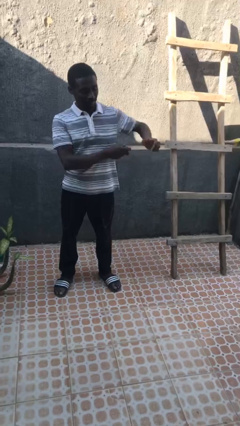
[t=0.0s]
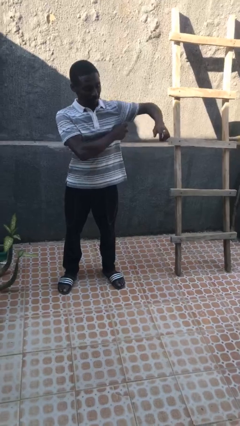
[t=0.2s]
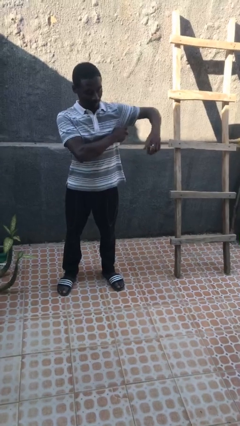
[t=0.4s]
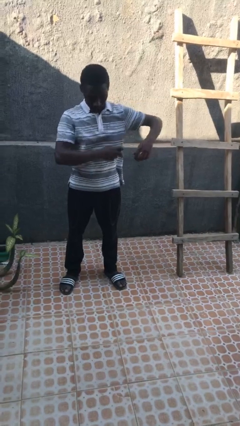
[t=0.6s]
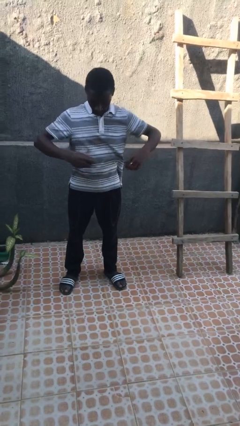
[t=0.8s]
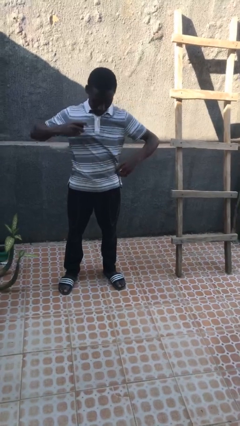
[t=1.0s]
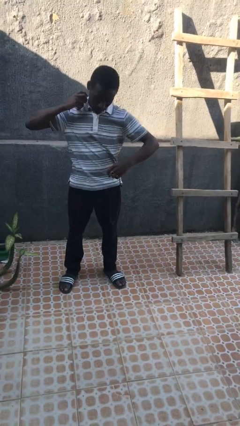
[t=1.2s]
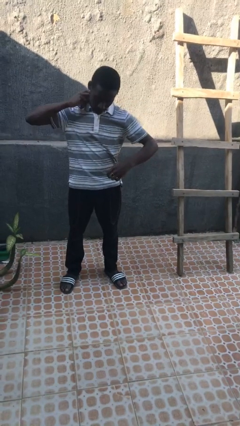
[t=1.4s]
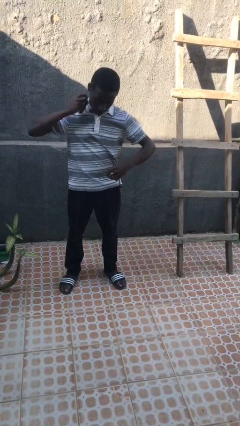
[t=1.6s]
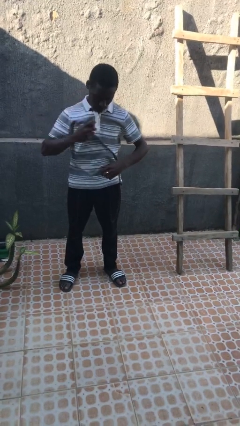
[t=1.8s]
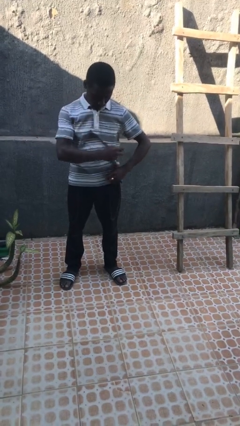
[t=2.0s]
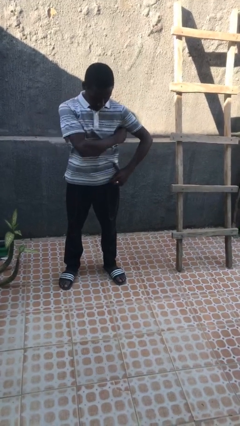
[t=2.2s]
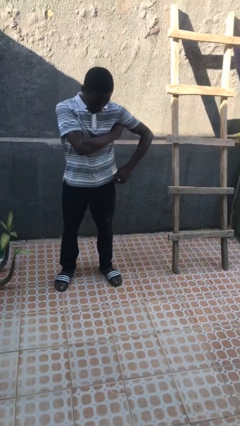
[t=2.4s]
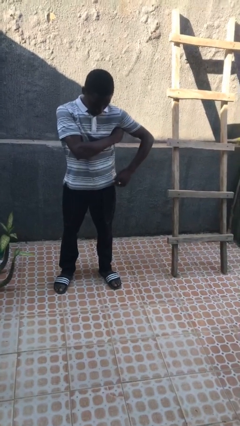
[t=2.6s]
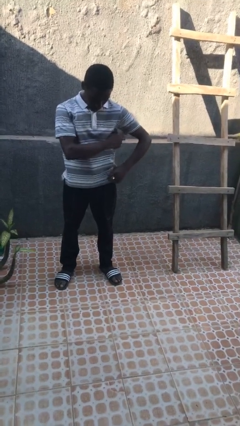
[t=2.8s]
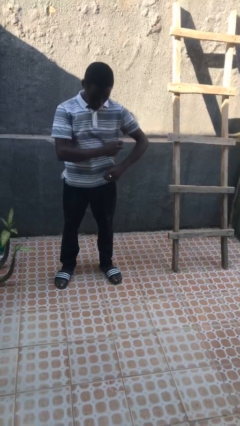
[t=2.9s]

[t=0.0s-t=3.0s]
person applies deodorant

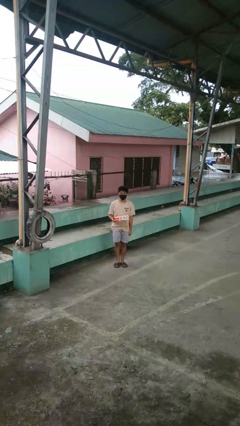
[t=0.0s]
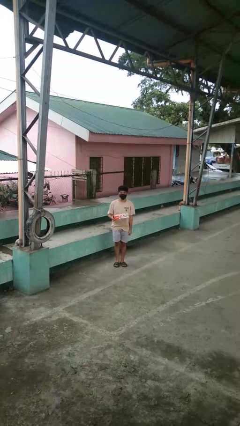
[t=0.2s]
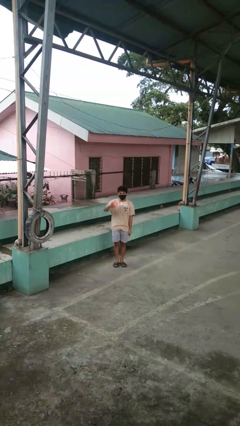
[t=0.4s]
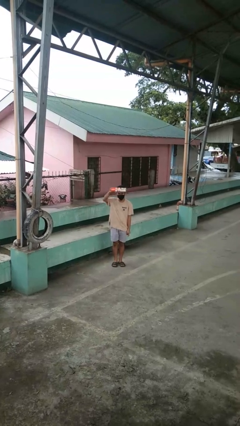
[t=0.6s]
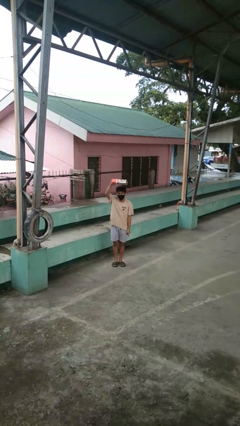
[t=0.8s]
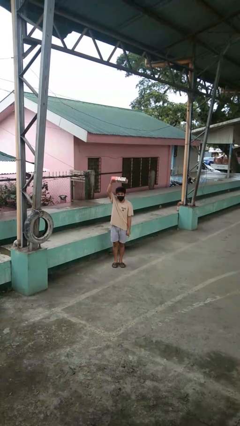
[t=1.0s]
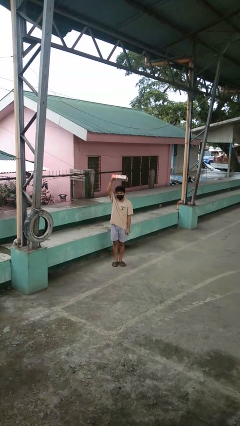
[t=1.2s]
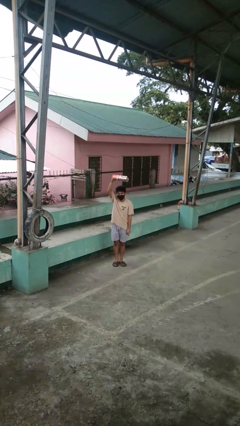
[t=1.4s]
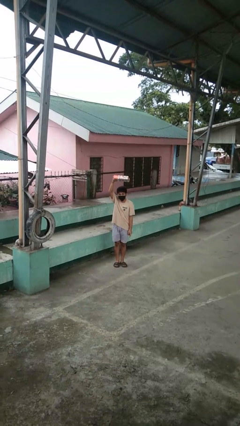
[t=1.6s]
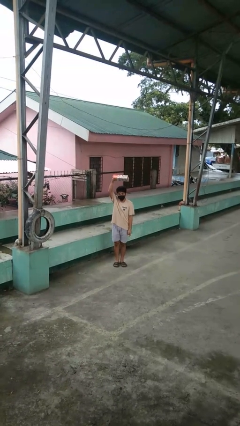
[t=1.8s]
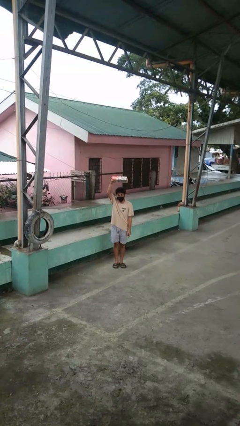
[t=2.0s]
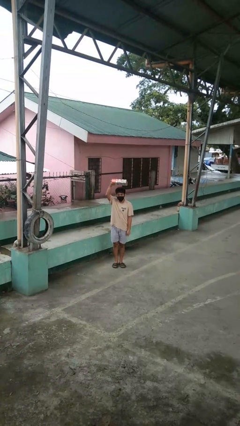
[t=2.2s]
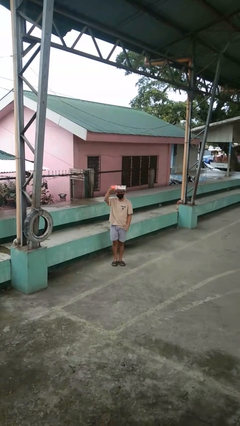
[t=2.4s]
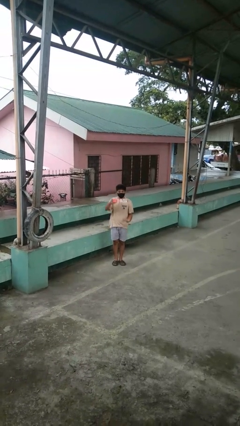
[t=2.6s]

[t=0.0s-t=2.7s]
person holds object above head

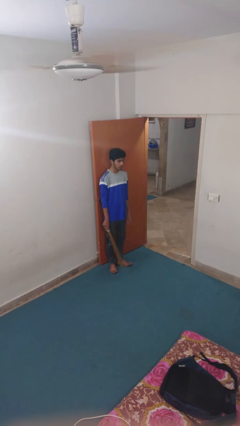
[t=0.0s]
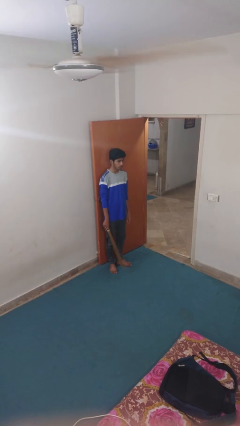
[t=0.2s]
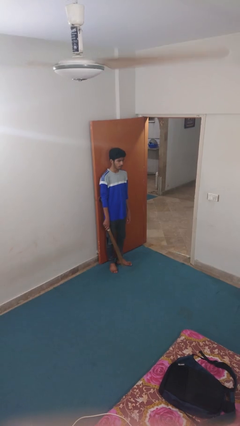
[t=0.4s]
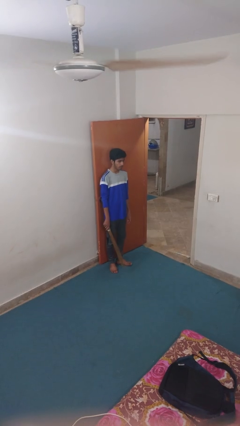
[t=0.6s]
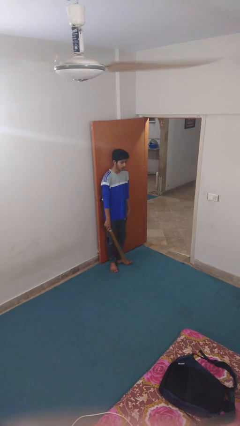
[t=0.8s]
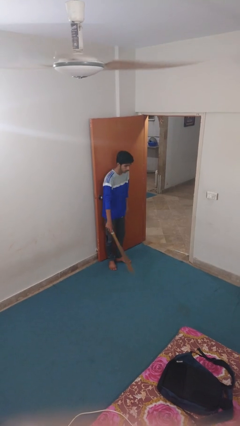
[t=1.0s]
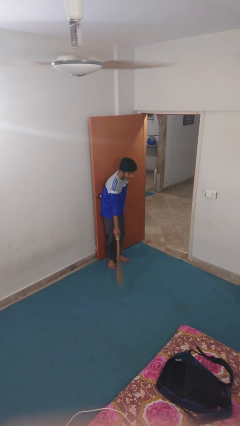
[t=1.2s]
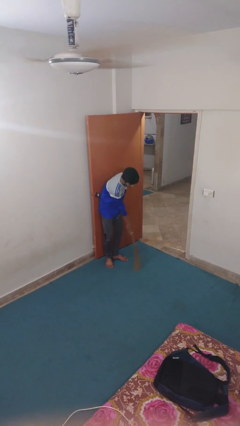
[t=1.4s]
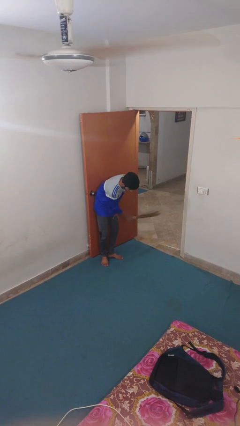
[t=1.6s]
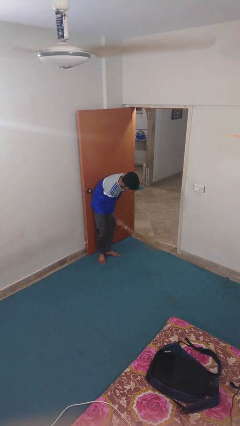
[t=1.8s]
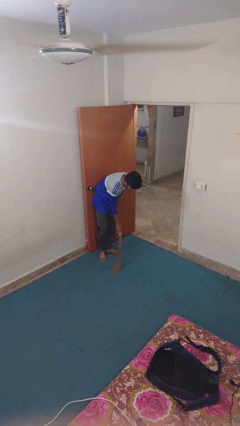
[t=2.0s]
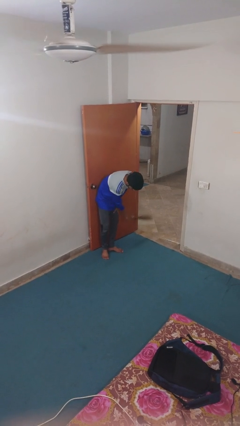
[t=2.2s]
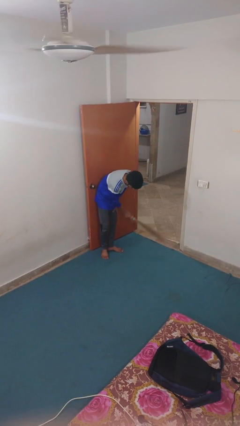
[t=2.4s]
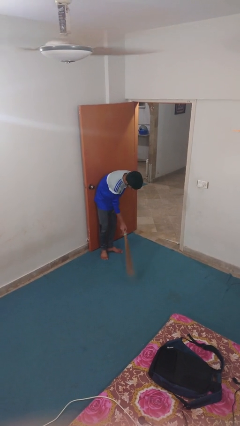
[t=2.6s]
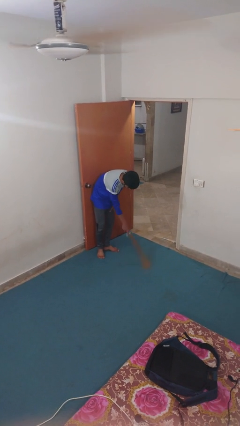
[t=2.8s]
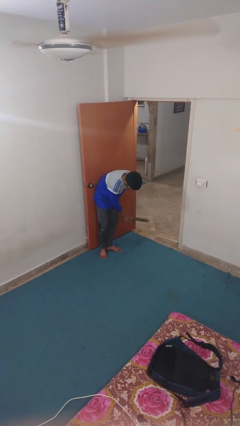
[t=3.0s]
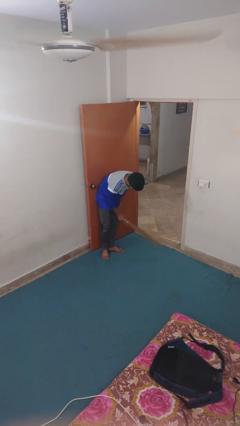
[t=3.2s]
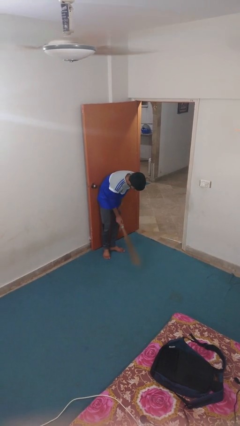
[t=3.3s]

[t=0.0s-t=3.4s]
person sweeps floor

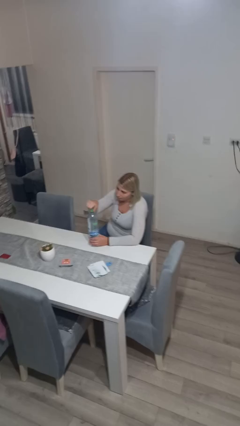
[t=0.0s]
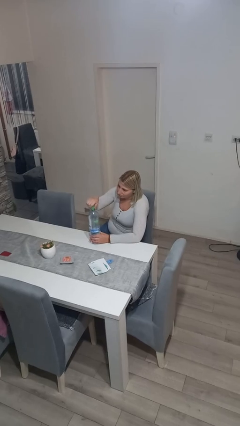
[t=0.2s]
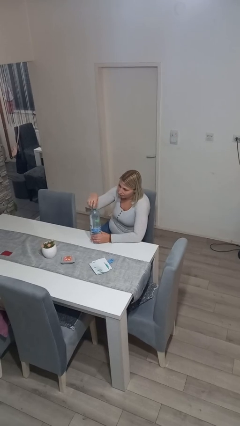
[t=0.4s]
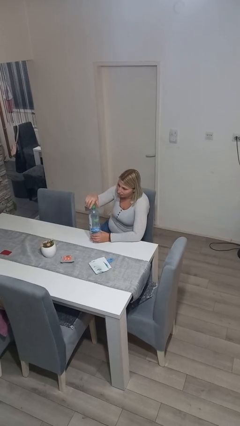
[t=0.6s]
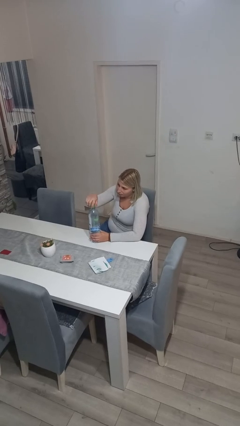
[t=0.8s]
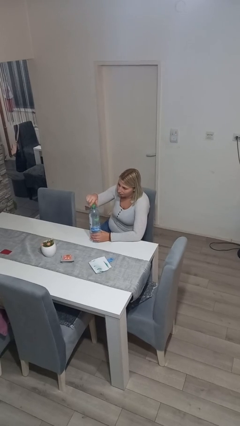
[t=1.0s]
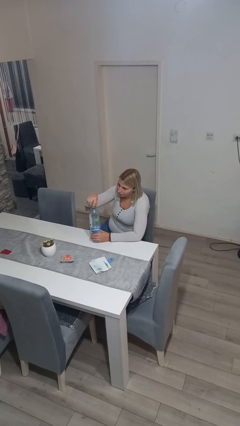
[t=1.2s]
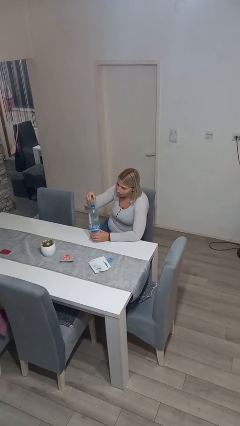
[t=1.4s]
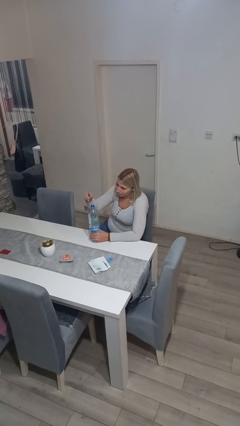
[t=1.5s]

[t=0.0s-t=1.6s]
person unscrews lid from bottle

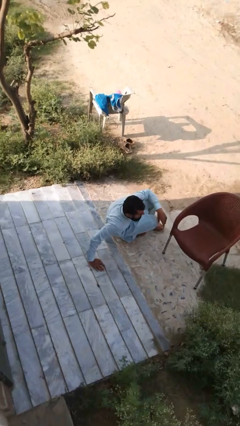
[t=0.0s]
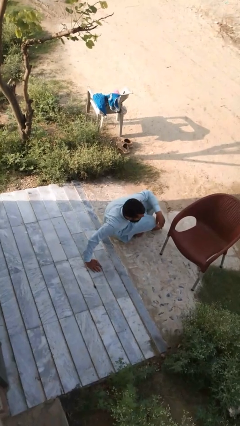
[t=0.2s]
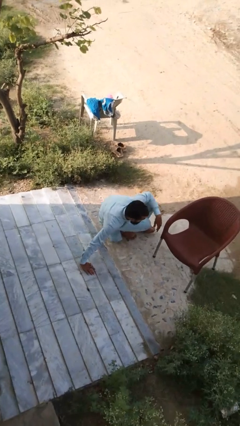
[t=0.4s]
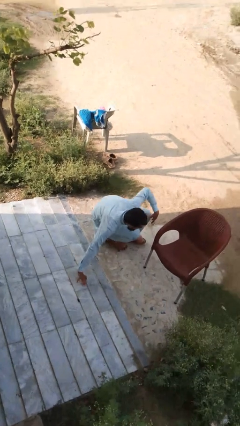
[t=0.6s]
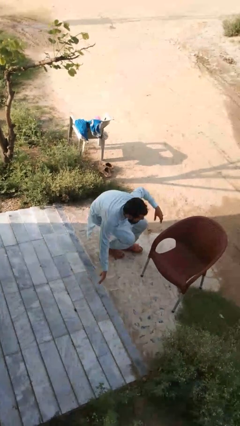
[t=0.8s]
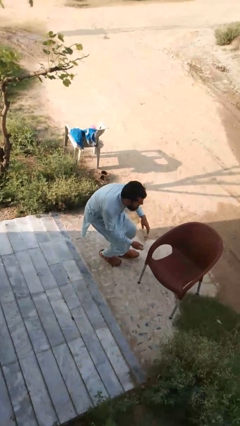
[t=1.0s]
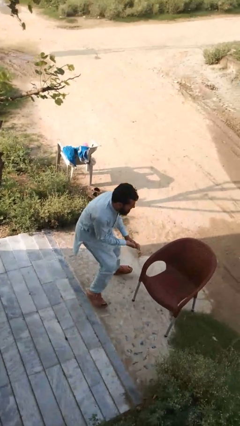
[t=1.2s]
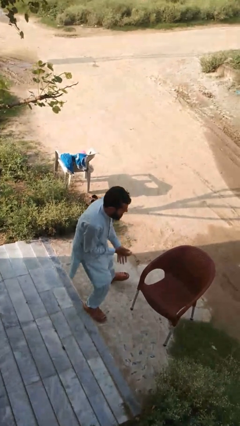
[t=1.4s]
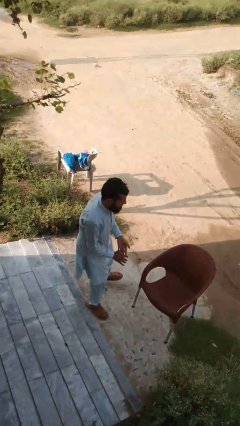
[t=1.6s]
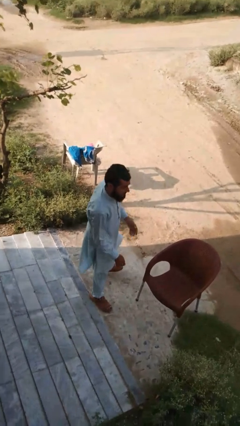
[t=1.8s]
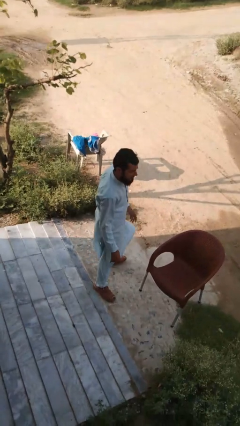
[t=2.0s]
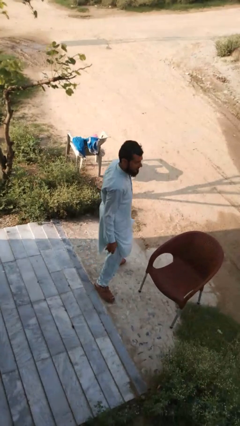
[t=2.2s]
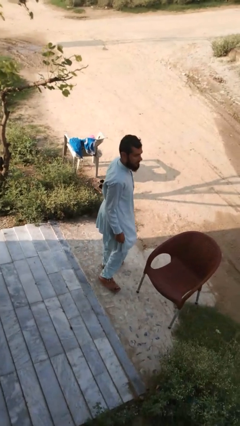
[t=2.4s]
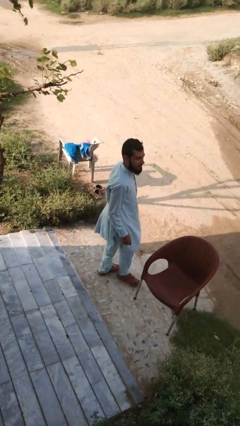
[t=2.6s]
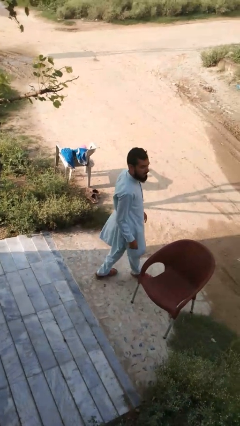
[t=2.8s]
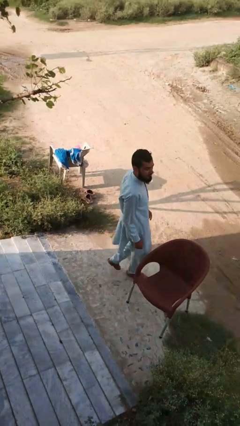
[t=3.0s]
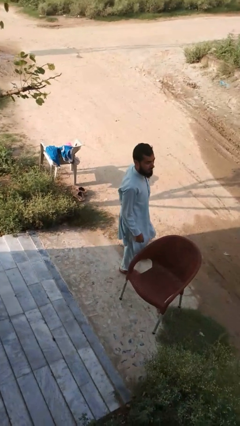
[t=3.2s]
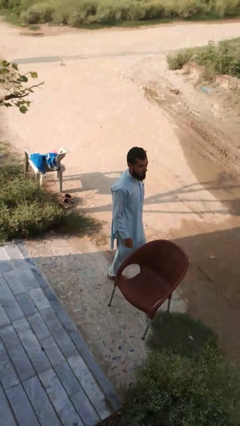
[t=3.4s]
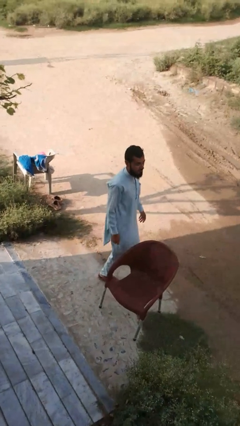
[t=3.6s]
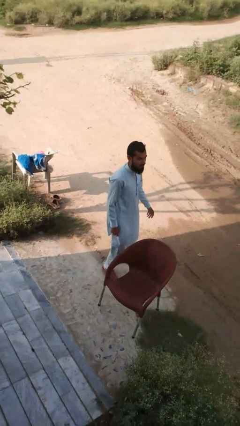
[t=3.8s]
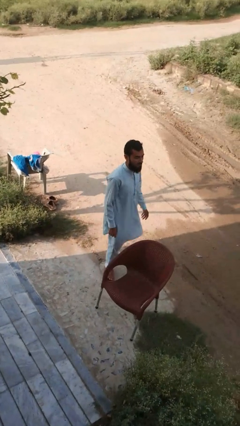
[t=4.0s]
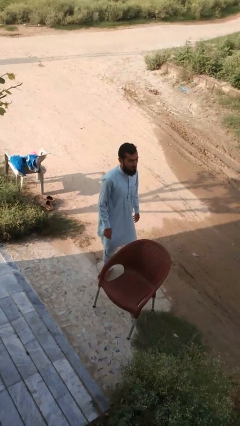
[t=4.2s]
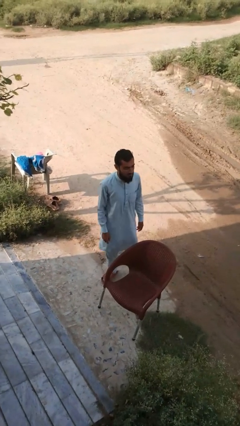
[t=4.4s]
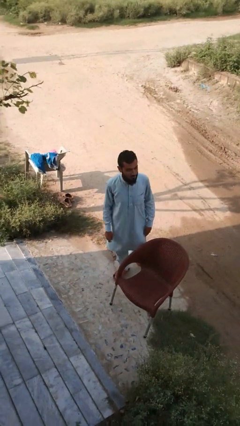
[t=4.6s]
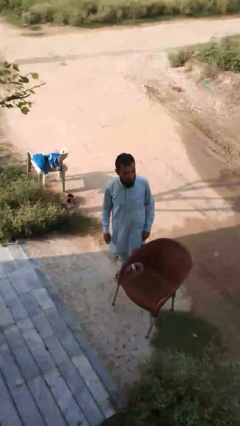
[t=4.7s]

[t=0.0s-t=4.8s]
person stands up from floor

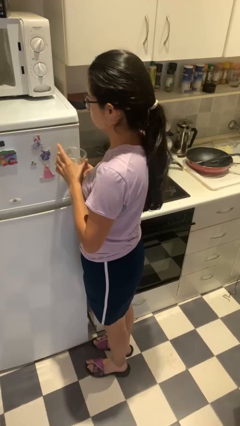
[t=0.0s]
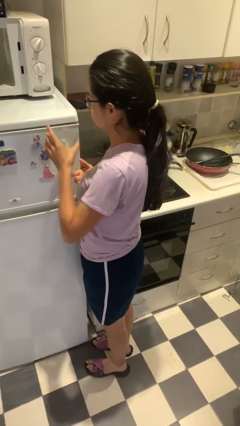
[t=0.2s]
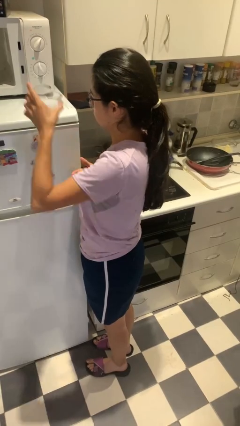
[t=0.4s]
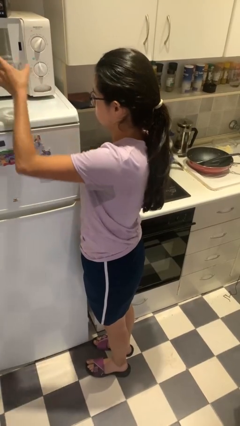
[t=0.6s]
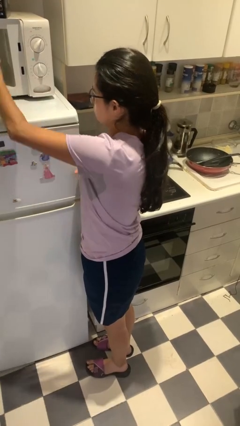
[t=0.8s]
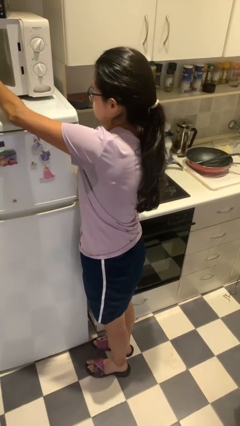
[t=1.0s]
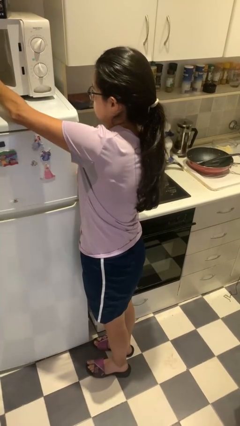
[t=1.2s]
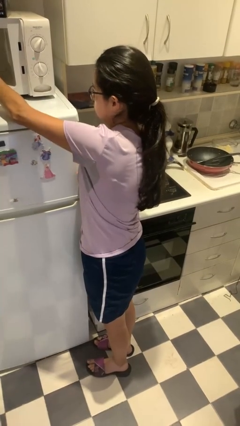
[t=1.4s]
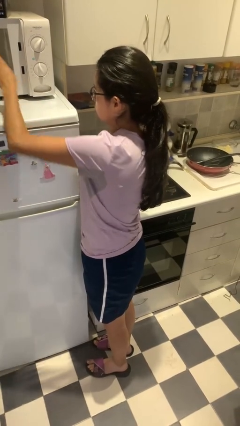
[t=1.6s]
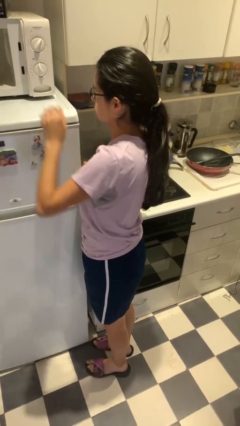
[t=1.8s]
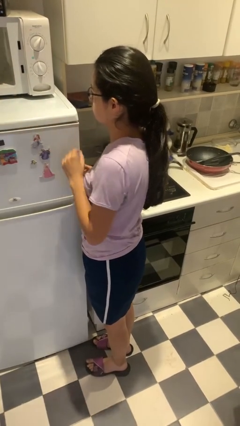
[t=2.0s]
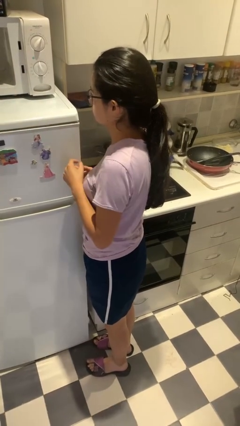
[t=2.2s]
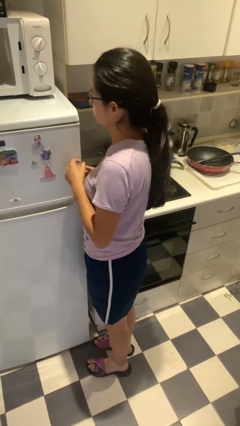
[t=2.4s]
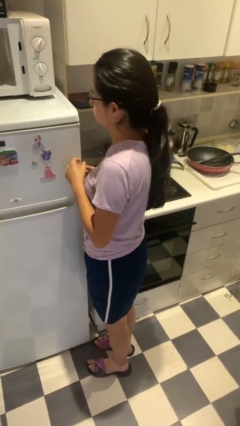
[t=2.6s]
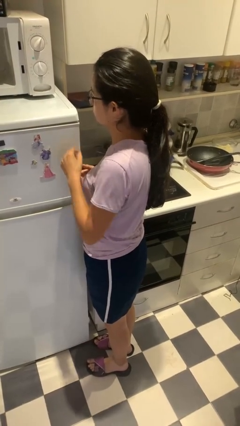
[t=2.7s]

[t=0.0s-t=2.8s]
person puts object into microwave
